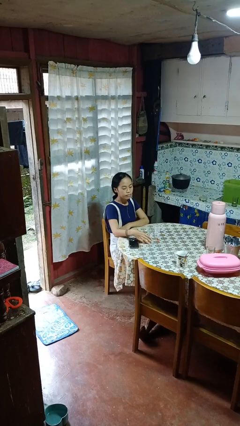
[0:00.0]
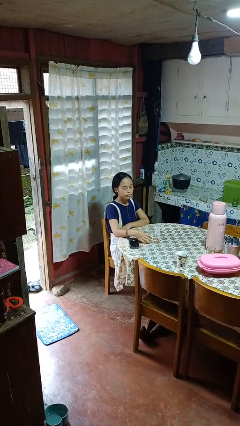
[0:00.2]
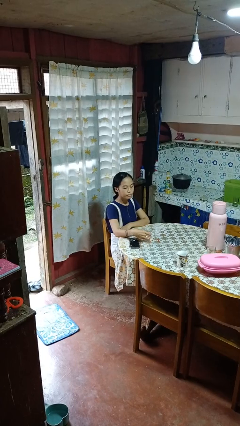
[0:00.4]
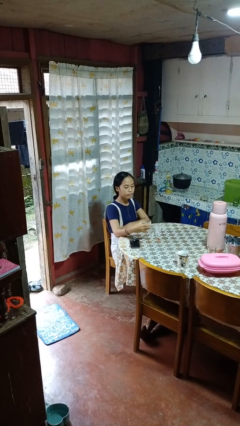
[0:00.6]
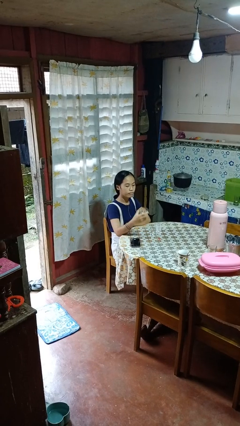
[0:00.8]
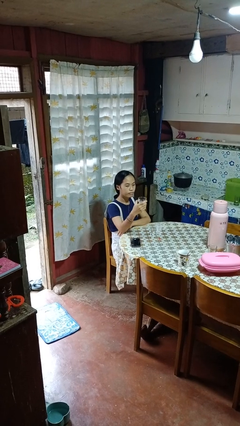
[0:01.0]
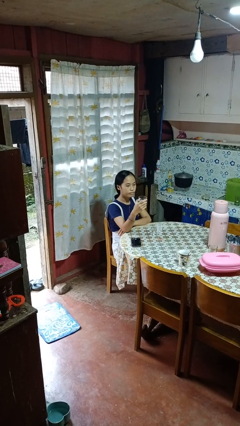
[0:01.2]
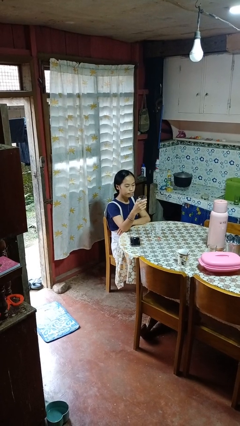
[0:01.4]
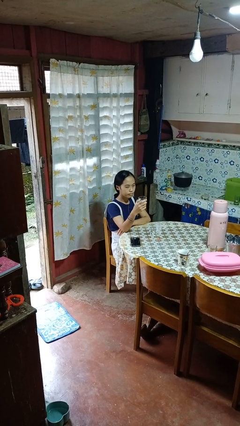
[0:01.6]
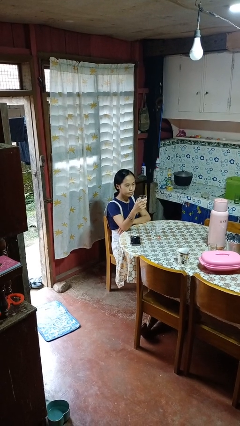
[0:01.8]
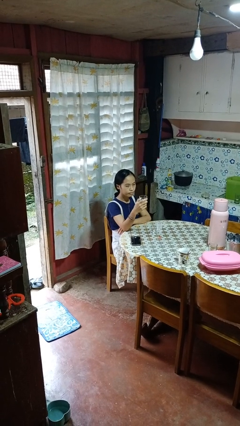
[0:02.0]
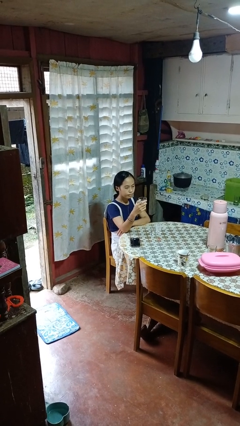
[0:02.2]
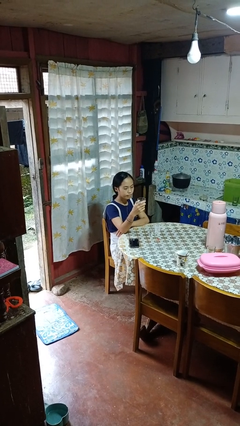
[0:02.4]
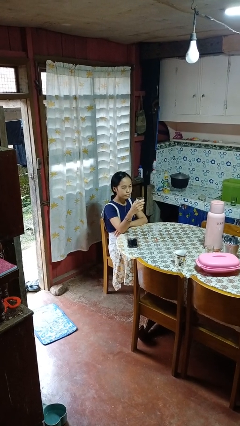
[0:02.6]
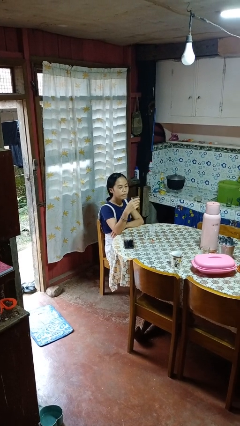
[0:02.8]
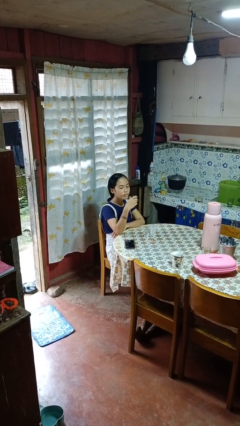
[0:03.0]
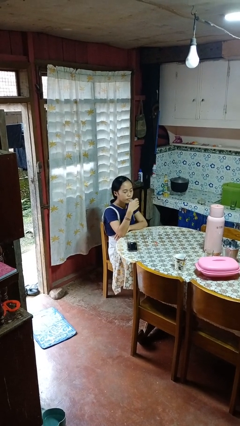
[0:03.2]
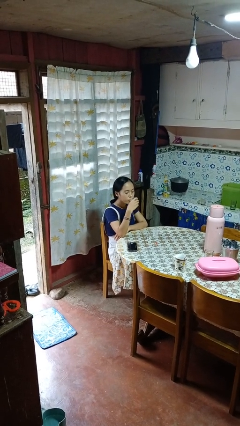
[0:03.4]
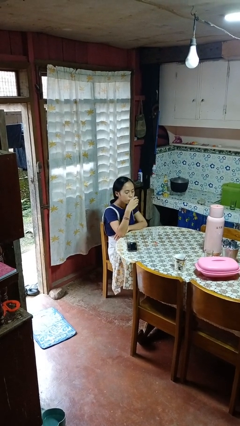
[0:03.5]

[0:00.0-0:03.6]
person picks up object from table

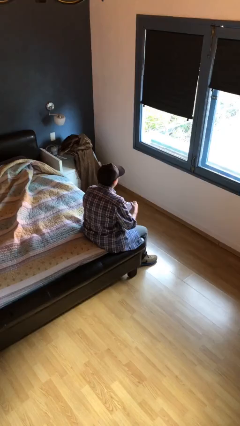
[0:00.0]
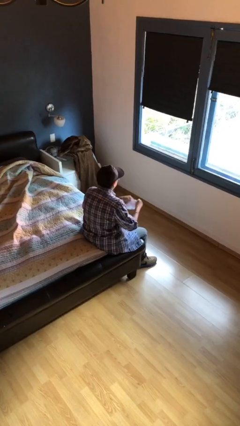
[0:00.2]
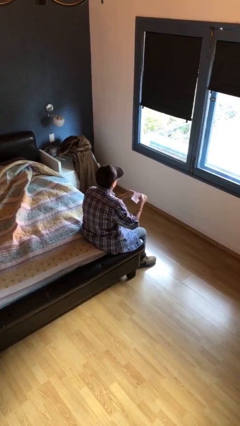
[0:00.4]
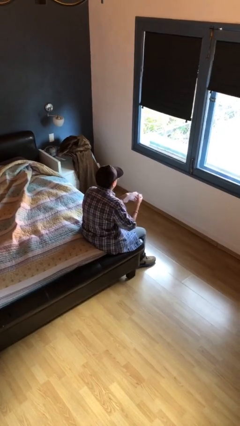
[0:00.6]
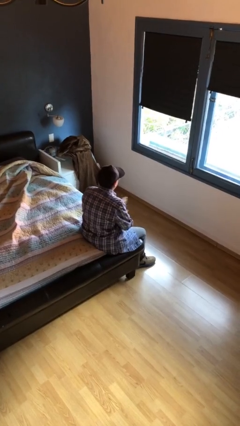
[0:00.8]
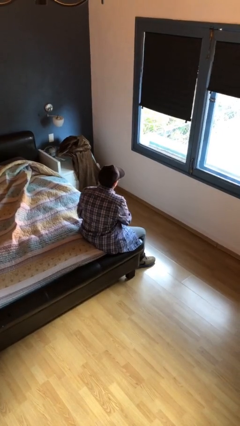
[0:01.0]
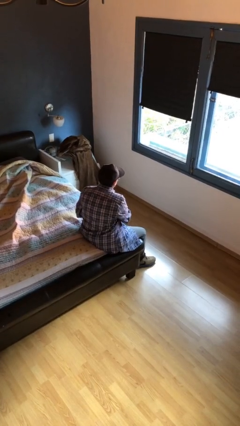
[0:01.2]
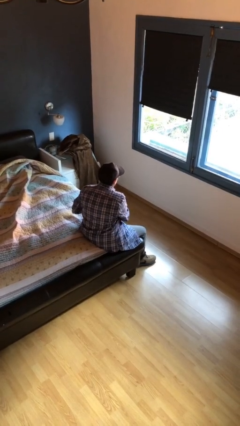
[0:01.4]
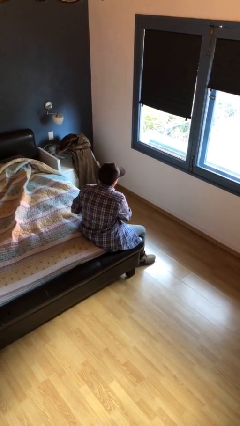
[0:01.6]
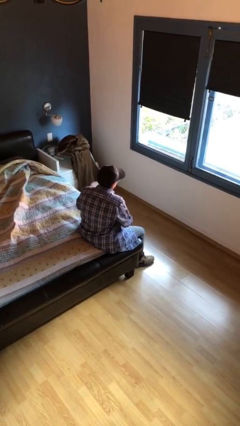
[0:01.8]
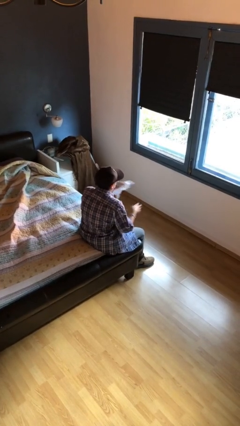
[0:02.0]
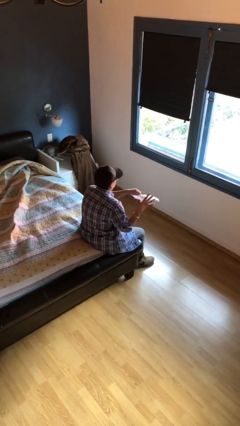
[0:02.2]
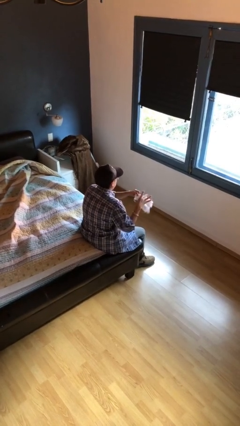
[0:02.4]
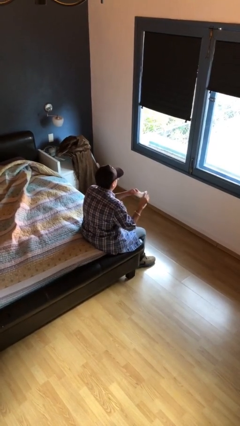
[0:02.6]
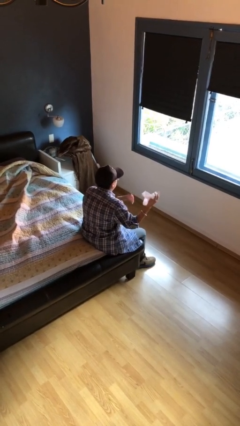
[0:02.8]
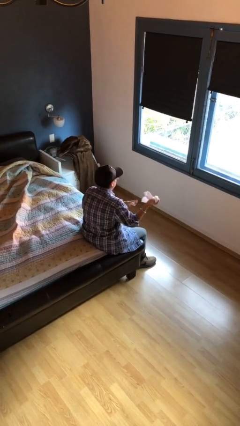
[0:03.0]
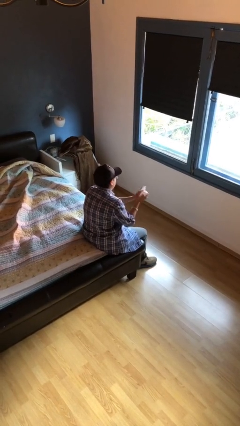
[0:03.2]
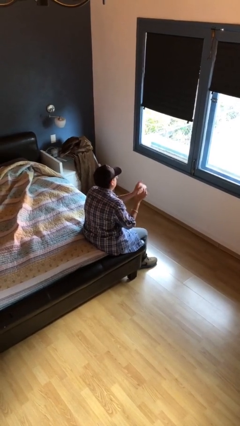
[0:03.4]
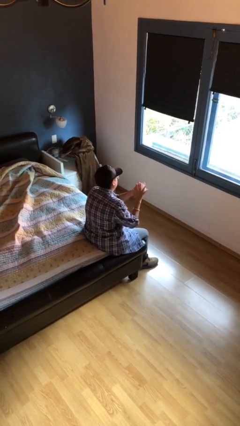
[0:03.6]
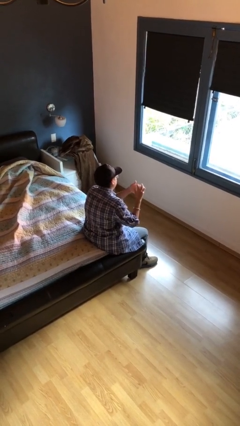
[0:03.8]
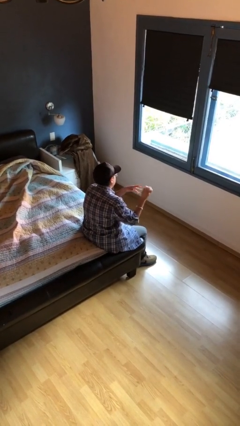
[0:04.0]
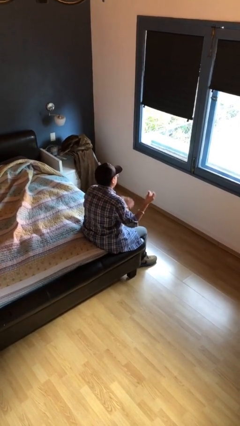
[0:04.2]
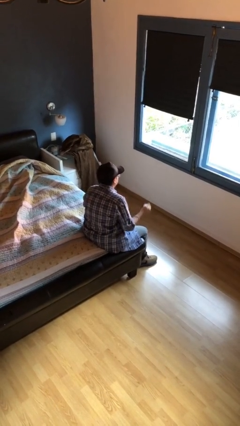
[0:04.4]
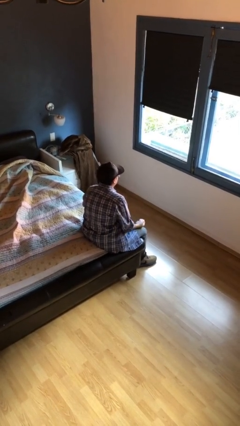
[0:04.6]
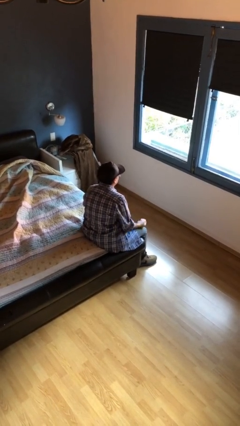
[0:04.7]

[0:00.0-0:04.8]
person crumples paper

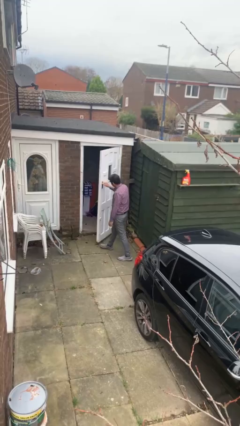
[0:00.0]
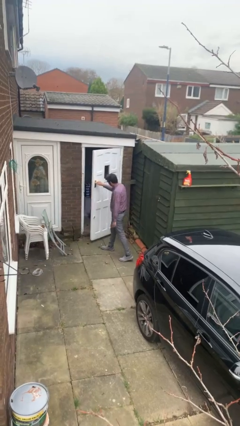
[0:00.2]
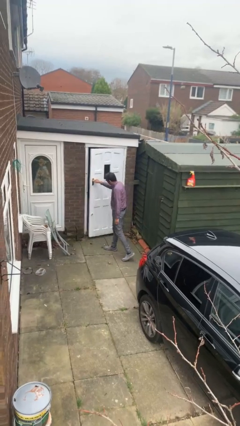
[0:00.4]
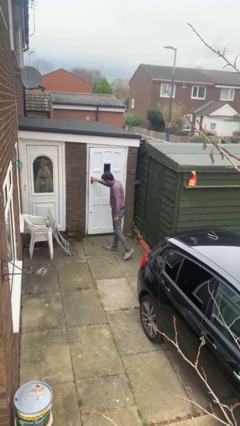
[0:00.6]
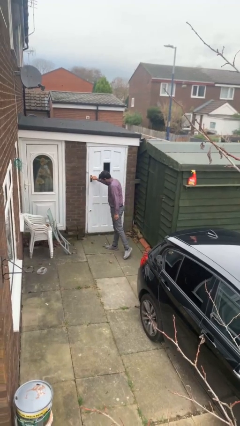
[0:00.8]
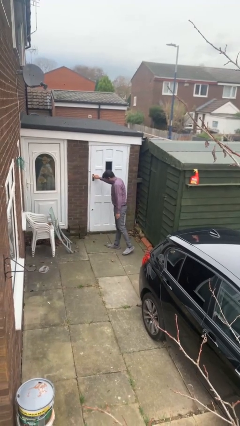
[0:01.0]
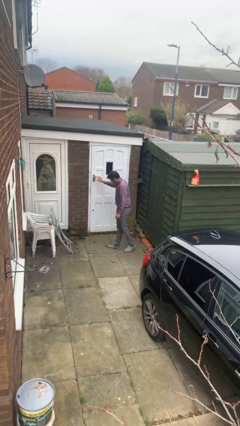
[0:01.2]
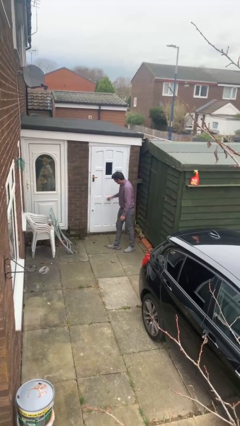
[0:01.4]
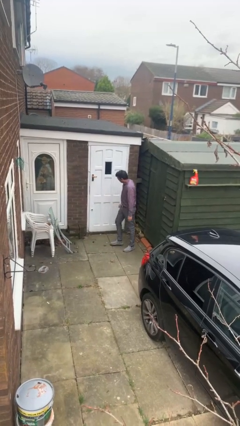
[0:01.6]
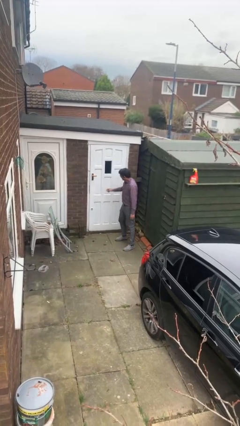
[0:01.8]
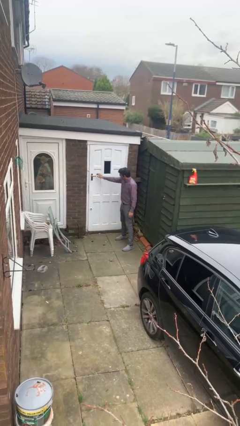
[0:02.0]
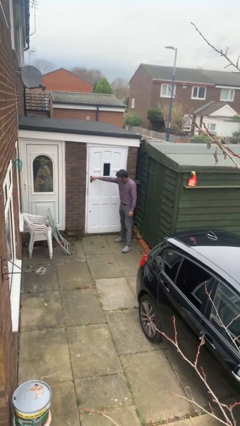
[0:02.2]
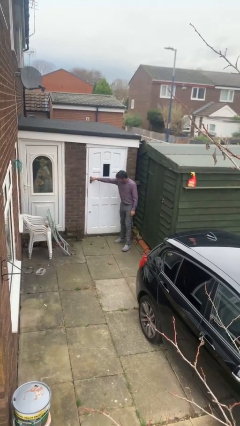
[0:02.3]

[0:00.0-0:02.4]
person closes facility door

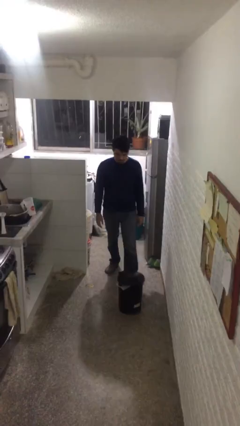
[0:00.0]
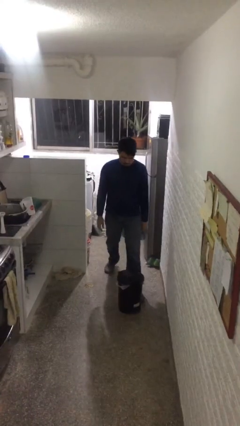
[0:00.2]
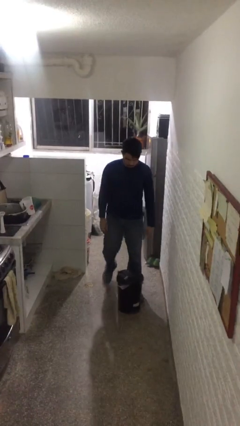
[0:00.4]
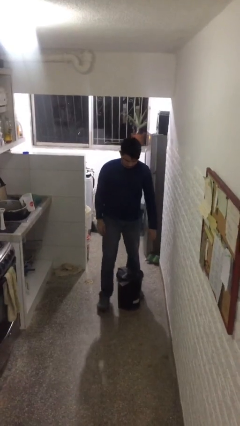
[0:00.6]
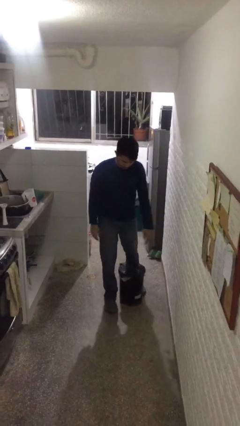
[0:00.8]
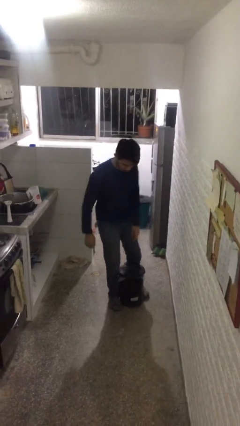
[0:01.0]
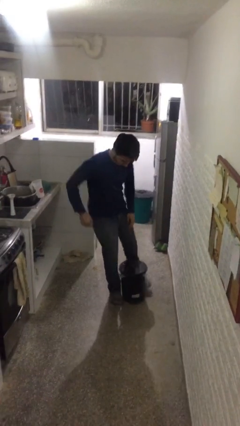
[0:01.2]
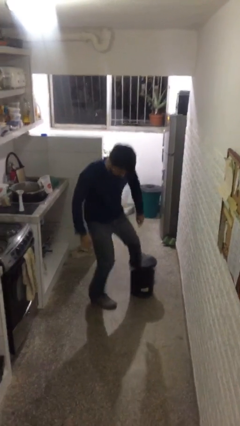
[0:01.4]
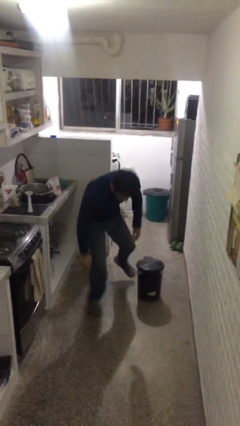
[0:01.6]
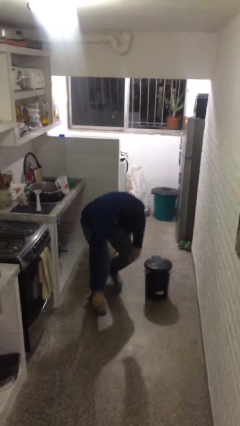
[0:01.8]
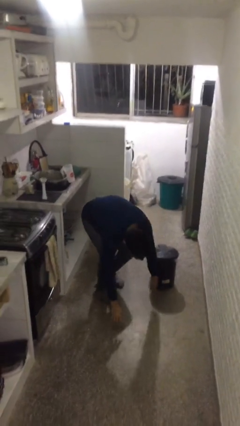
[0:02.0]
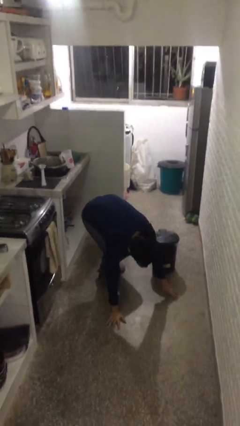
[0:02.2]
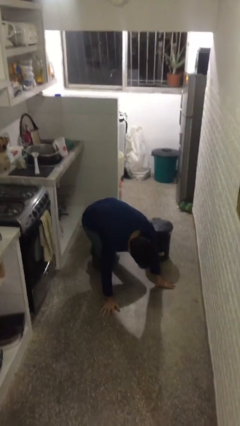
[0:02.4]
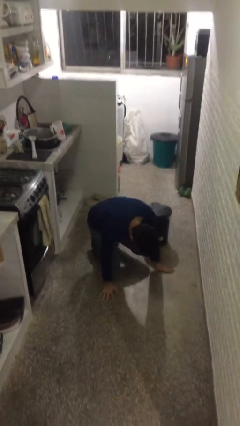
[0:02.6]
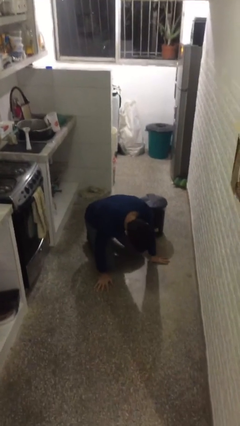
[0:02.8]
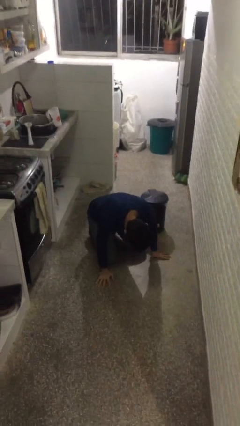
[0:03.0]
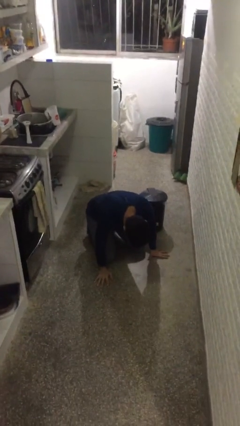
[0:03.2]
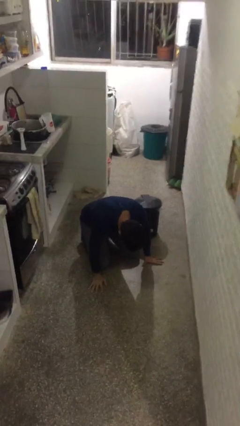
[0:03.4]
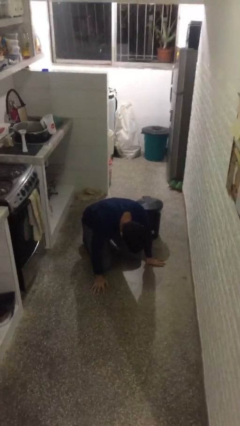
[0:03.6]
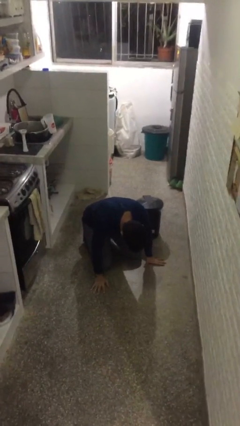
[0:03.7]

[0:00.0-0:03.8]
person trips on object on floor

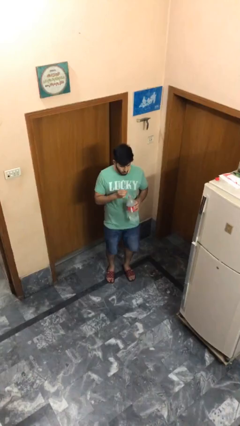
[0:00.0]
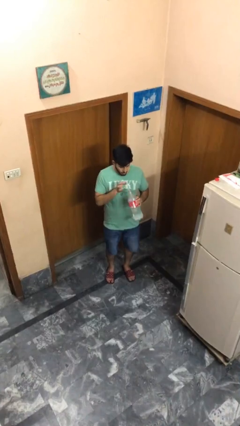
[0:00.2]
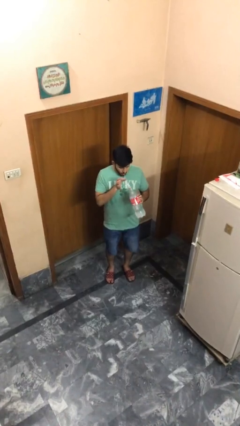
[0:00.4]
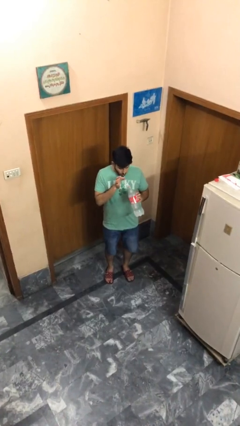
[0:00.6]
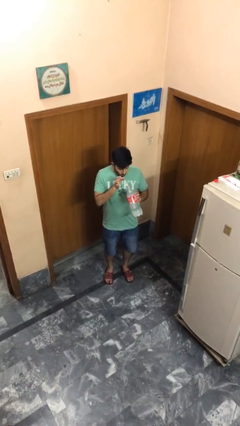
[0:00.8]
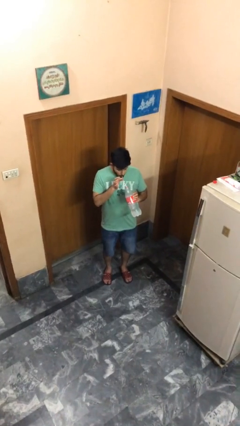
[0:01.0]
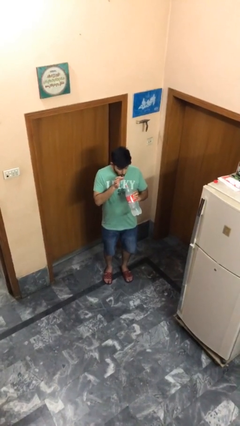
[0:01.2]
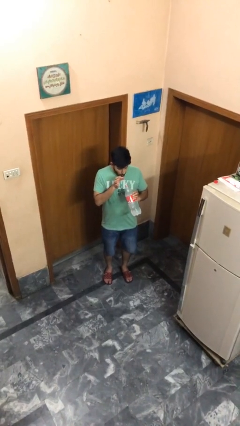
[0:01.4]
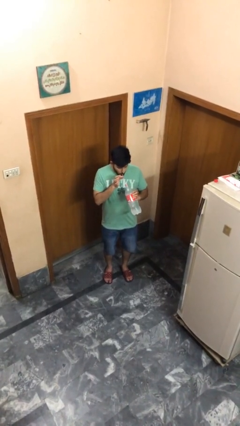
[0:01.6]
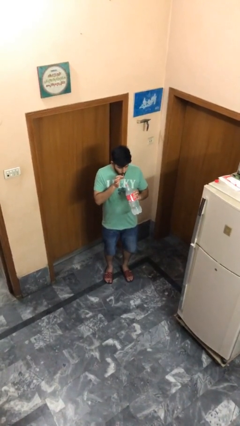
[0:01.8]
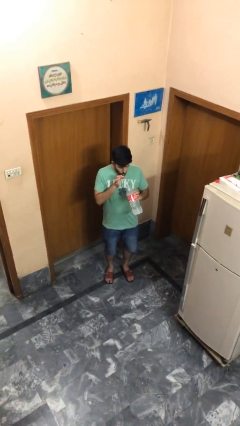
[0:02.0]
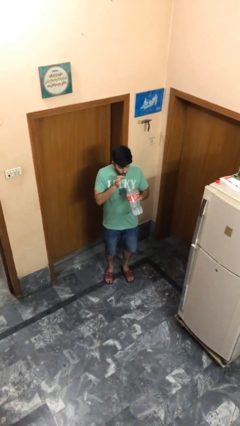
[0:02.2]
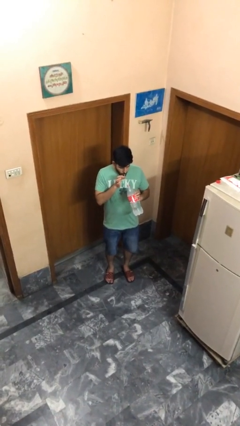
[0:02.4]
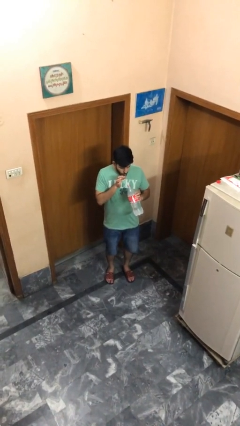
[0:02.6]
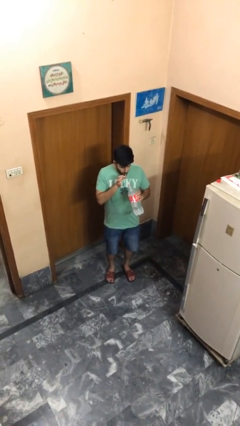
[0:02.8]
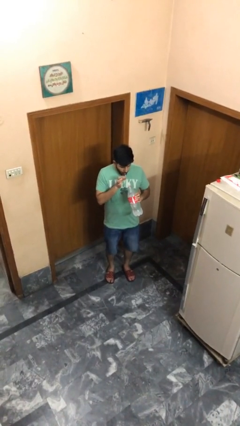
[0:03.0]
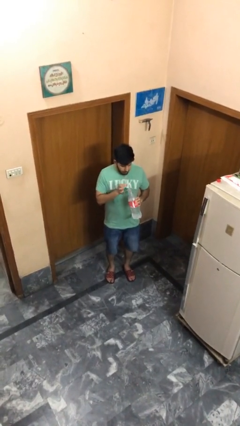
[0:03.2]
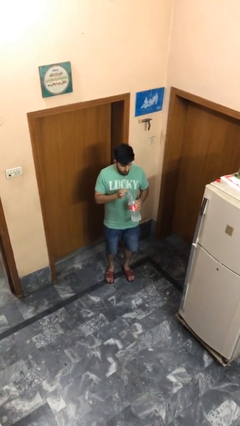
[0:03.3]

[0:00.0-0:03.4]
person drinks from straw
